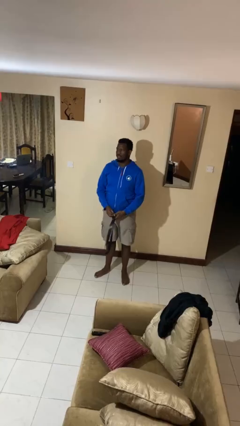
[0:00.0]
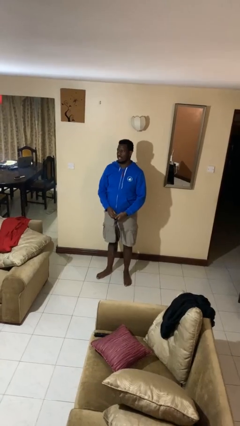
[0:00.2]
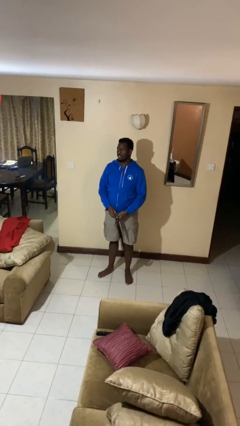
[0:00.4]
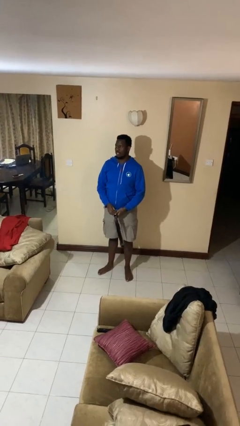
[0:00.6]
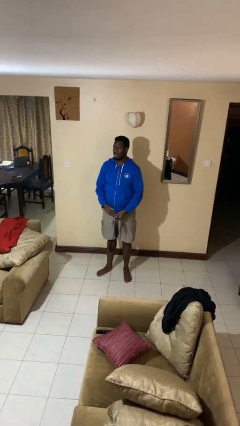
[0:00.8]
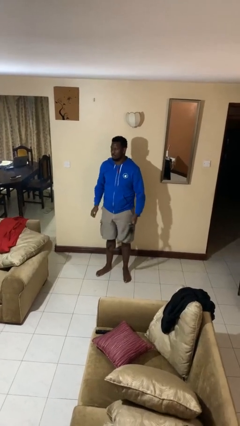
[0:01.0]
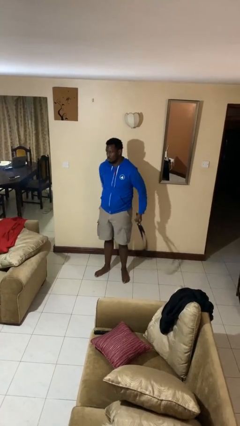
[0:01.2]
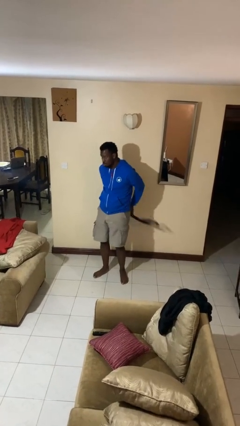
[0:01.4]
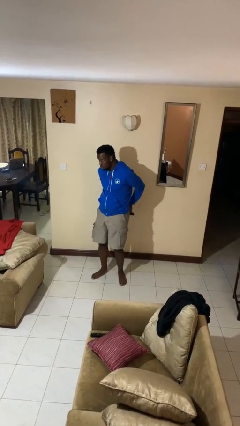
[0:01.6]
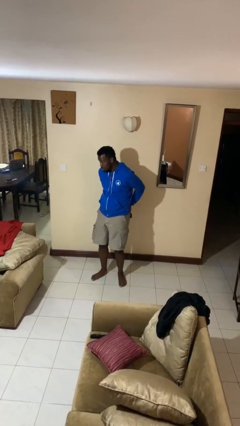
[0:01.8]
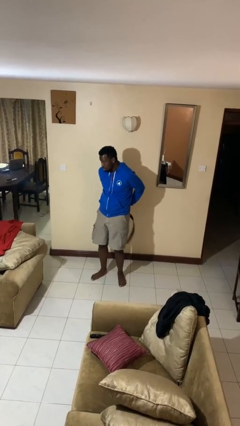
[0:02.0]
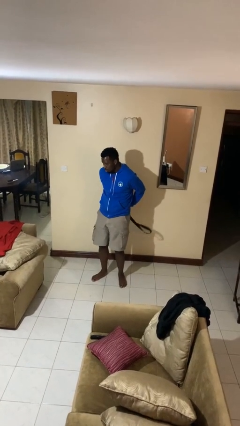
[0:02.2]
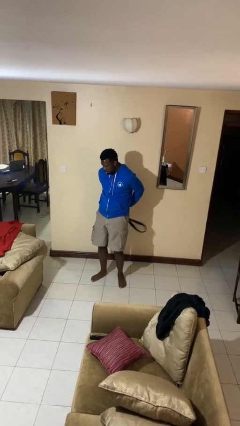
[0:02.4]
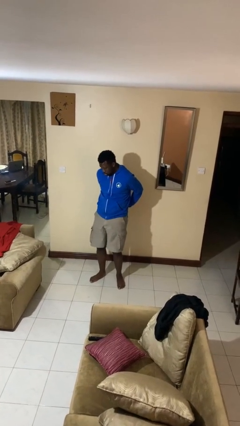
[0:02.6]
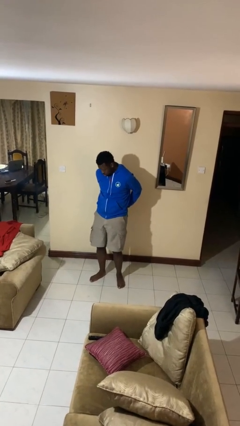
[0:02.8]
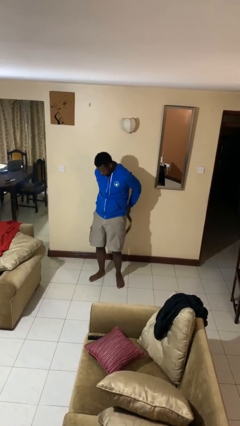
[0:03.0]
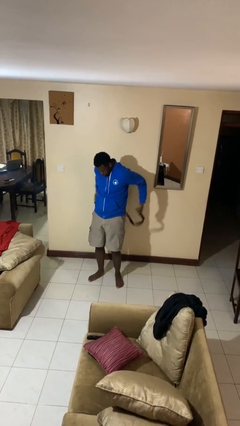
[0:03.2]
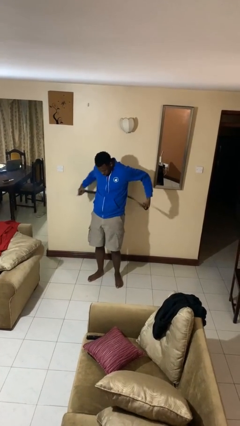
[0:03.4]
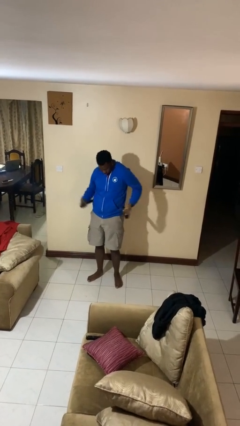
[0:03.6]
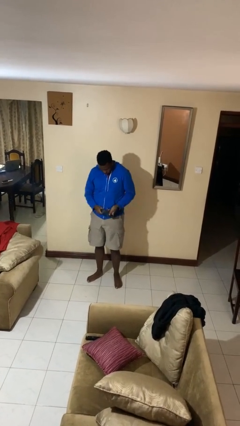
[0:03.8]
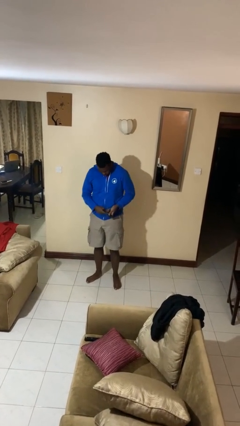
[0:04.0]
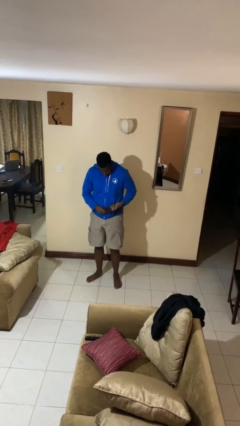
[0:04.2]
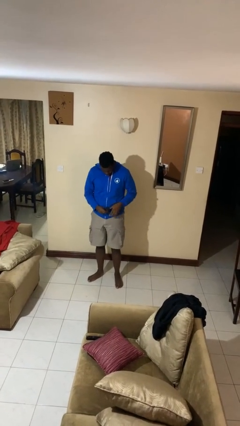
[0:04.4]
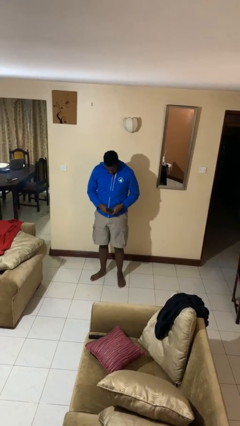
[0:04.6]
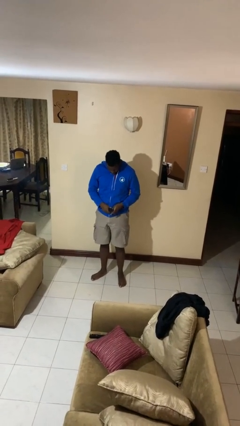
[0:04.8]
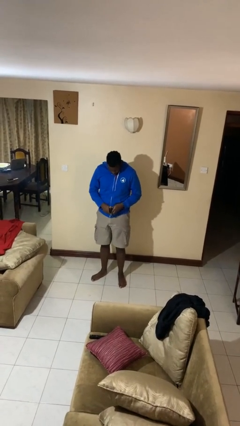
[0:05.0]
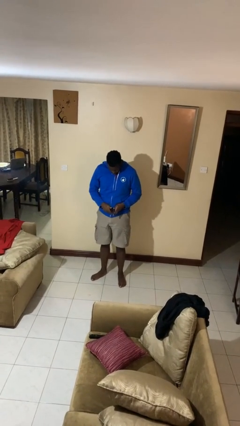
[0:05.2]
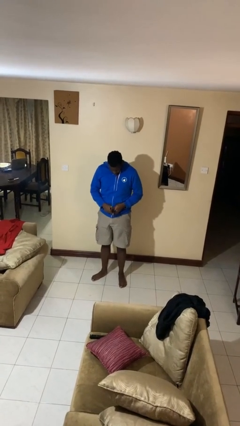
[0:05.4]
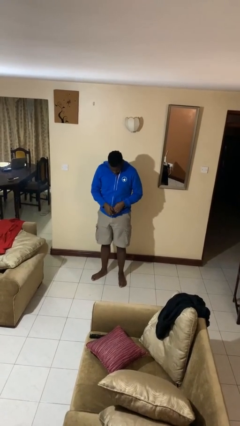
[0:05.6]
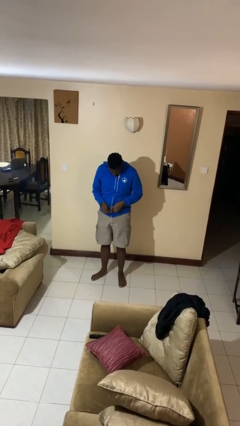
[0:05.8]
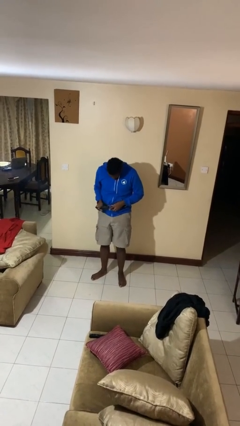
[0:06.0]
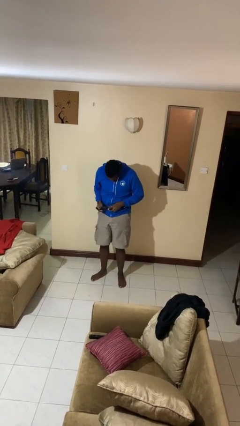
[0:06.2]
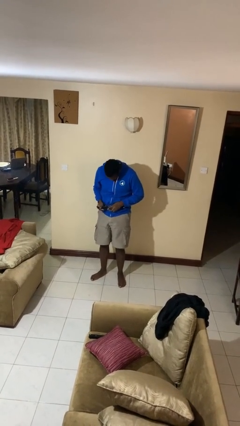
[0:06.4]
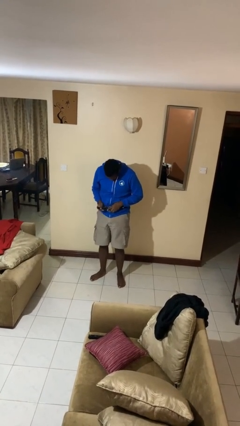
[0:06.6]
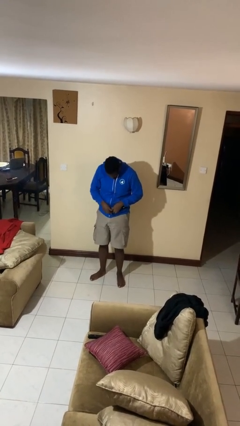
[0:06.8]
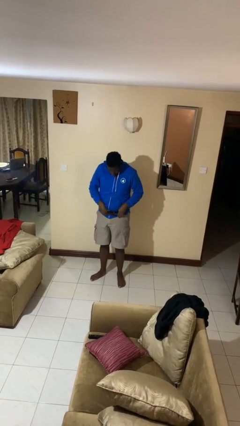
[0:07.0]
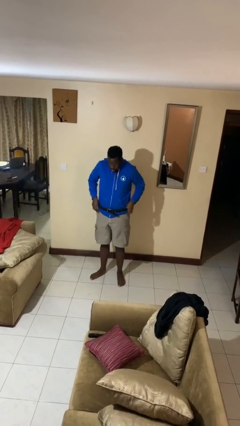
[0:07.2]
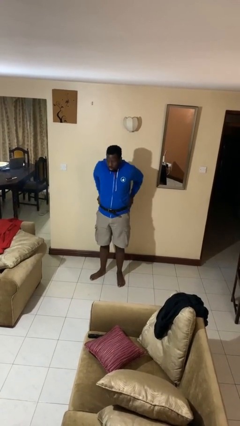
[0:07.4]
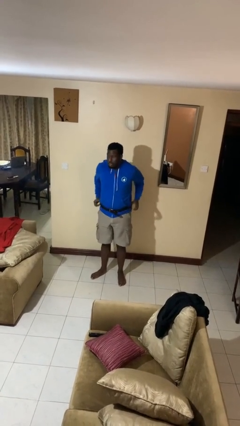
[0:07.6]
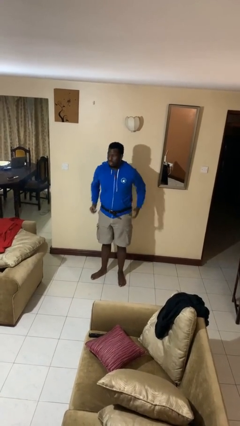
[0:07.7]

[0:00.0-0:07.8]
person puts on belt

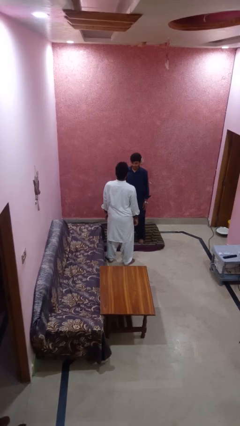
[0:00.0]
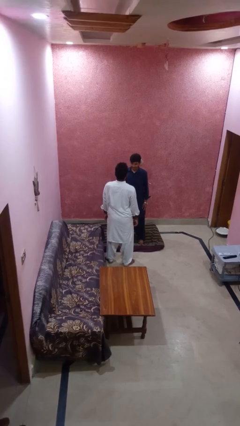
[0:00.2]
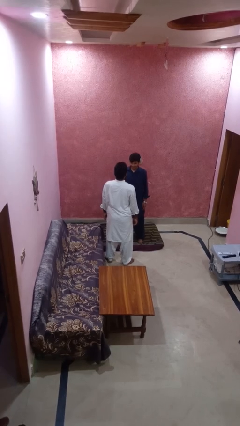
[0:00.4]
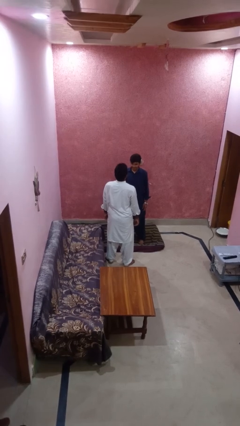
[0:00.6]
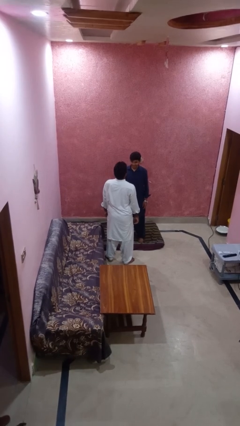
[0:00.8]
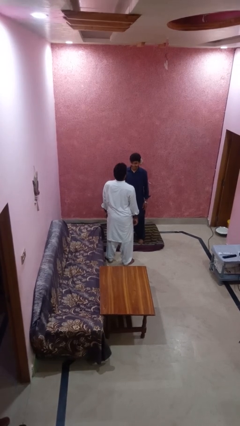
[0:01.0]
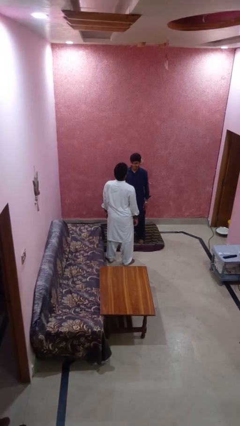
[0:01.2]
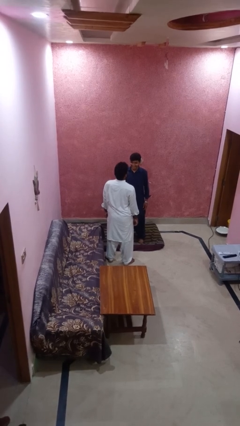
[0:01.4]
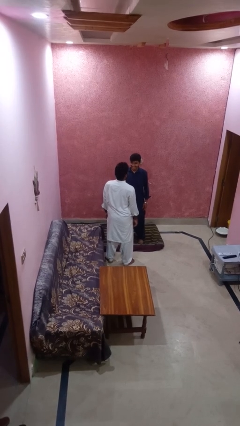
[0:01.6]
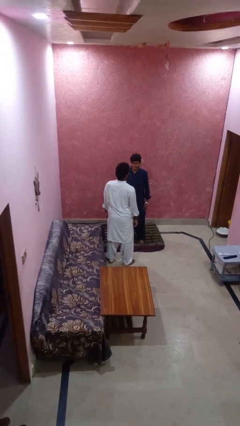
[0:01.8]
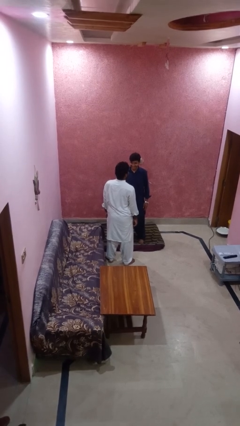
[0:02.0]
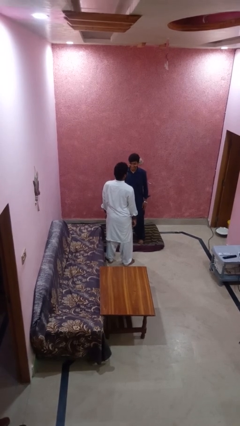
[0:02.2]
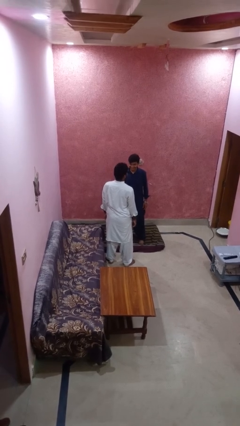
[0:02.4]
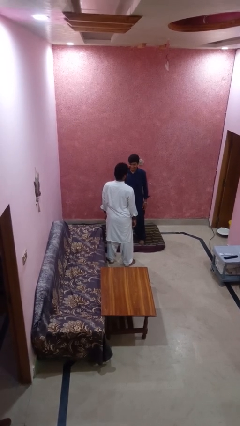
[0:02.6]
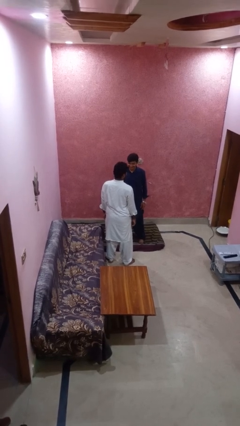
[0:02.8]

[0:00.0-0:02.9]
person laughs with person

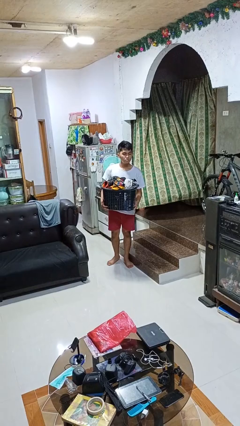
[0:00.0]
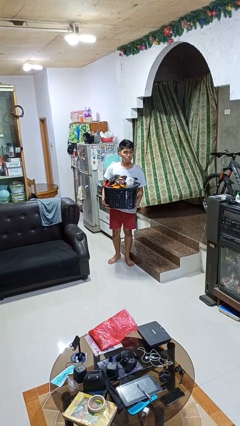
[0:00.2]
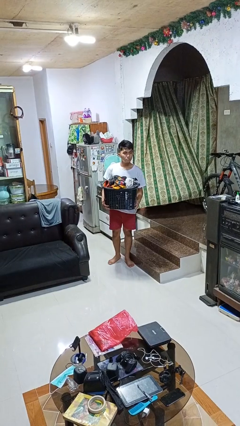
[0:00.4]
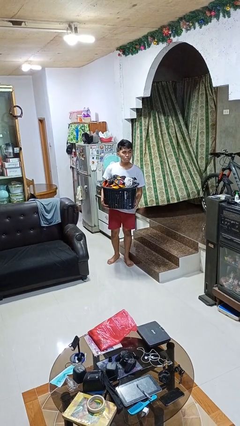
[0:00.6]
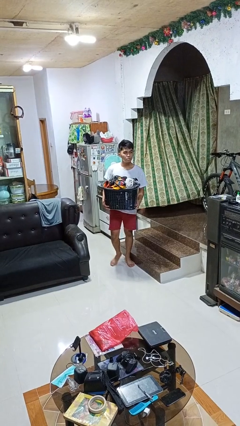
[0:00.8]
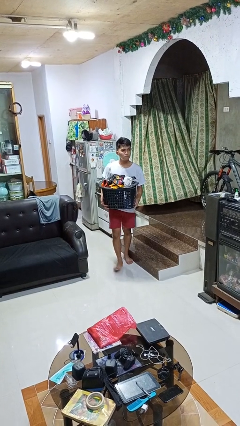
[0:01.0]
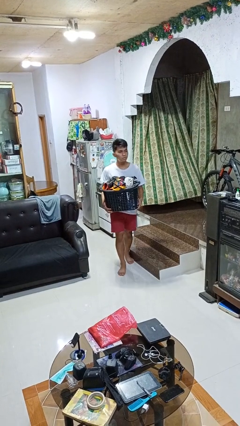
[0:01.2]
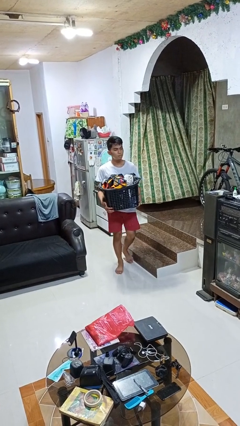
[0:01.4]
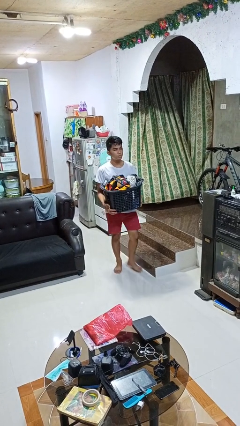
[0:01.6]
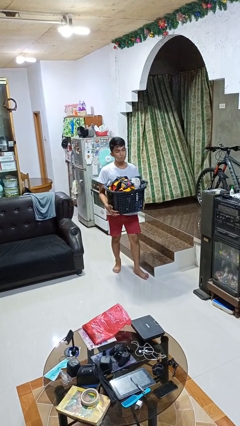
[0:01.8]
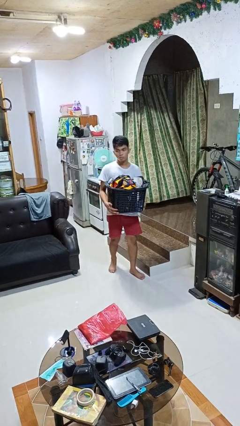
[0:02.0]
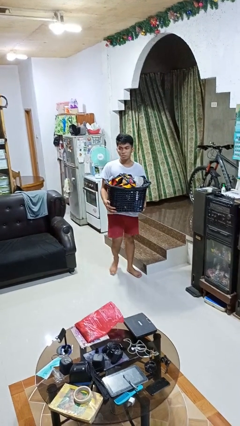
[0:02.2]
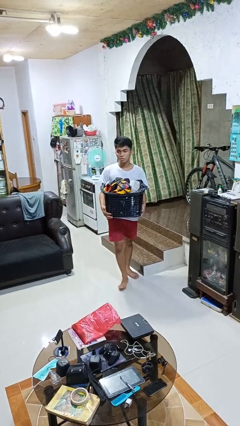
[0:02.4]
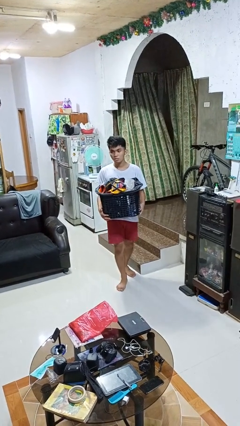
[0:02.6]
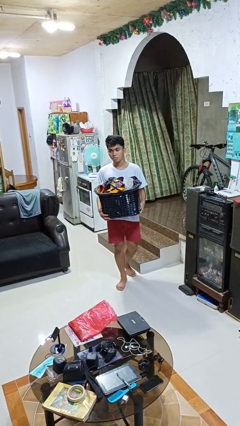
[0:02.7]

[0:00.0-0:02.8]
person carries laundry basket

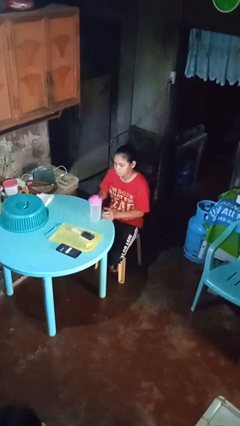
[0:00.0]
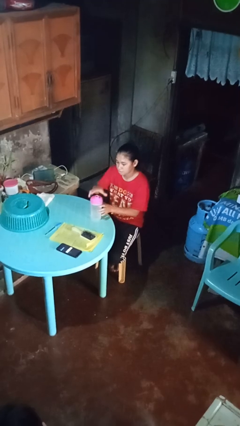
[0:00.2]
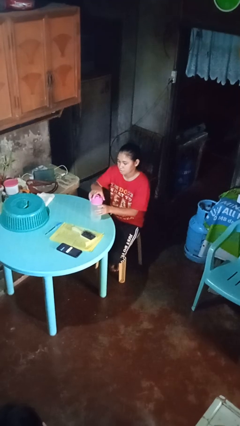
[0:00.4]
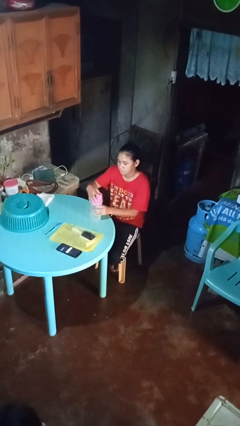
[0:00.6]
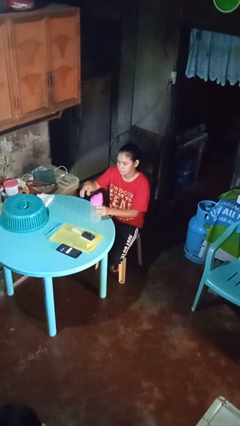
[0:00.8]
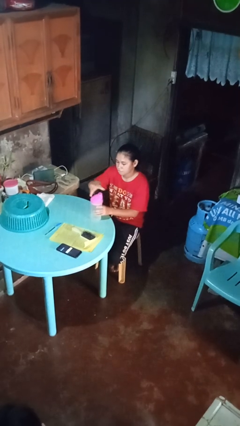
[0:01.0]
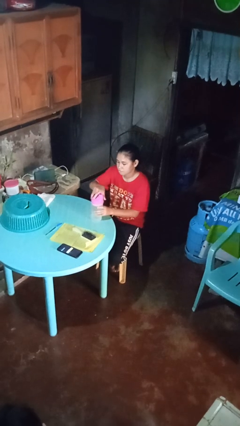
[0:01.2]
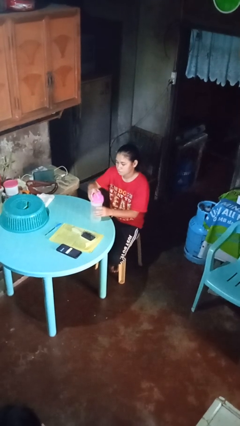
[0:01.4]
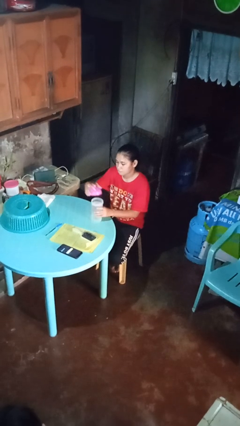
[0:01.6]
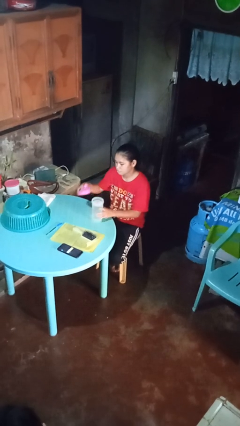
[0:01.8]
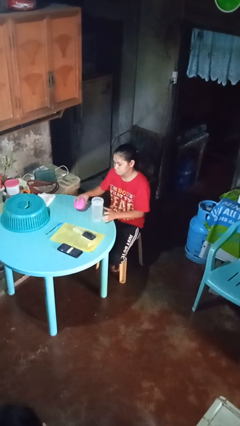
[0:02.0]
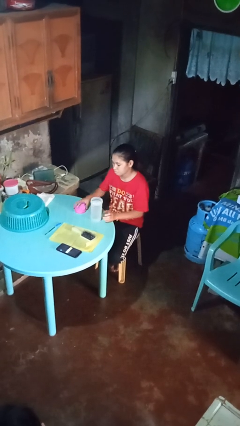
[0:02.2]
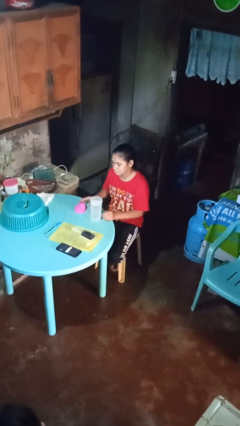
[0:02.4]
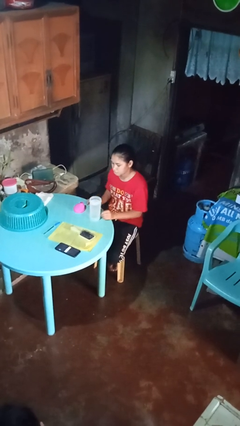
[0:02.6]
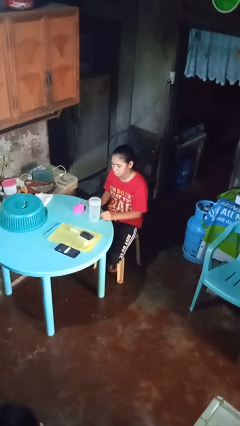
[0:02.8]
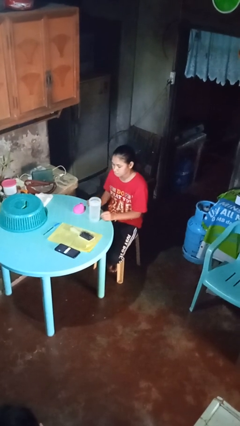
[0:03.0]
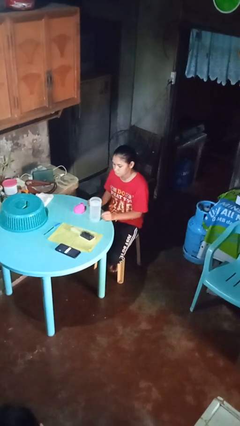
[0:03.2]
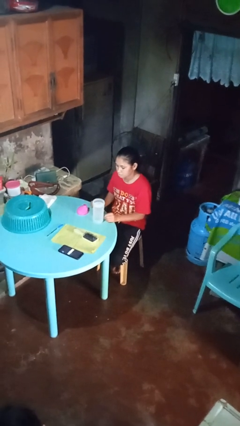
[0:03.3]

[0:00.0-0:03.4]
person unscrews lid from bottle

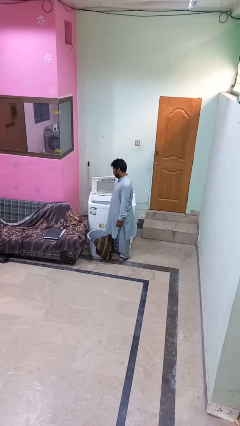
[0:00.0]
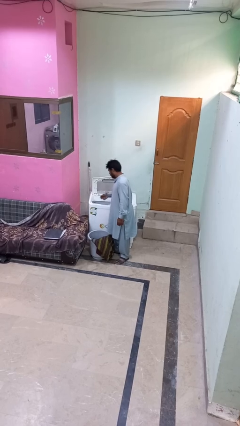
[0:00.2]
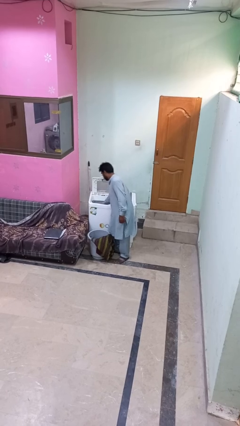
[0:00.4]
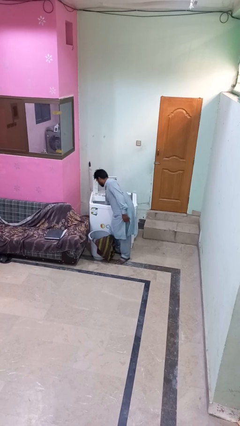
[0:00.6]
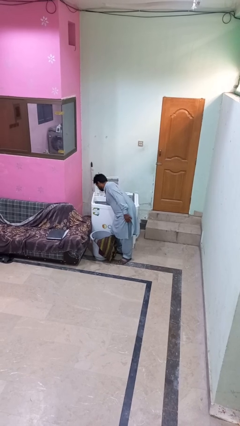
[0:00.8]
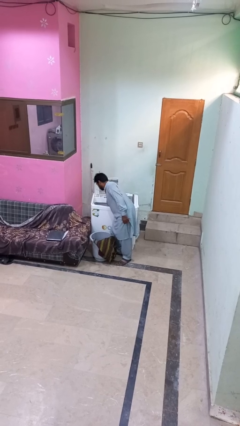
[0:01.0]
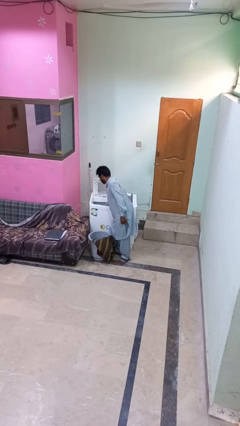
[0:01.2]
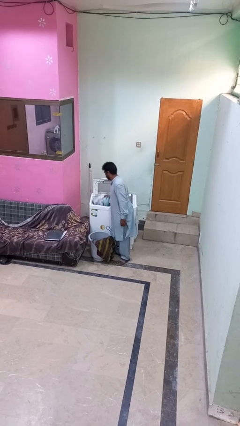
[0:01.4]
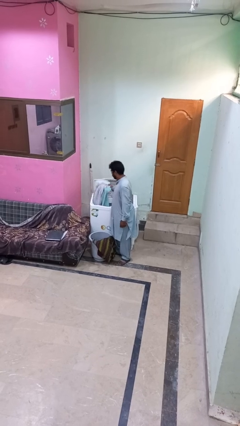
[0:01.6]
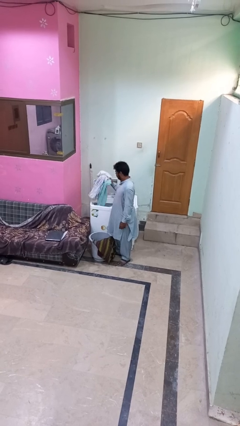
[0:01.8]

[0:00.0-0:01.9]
person unloads clotheswasher
